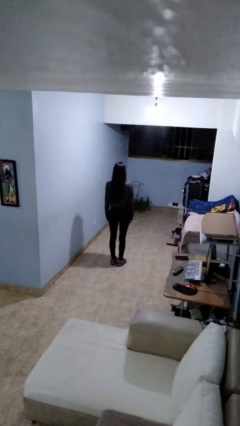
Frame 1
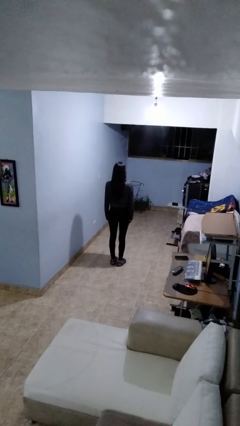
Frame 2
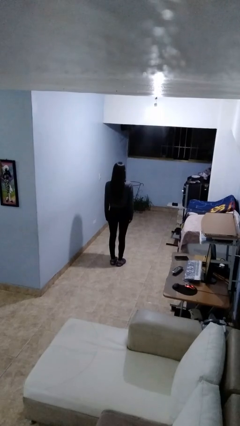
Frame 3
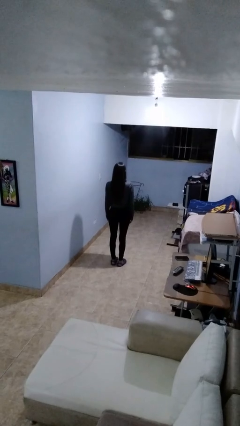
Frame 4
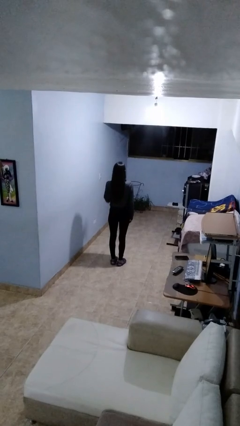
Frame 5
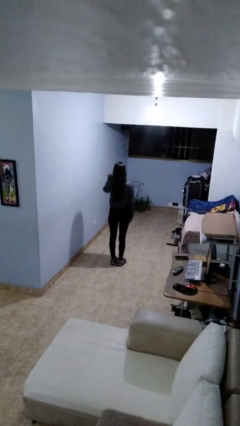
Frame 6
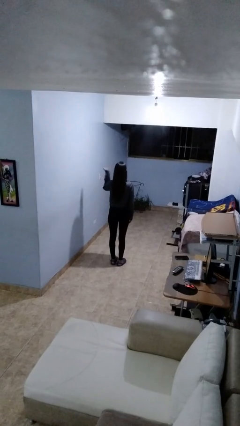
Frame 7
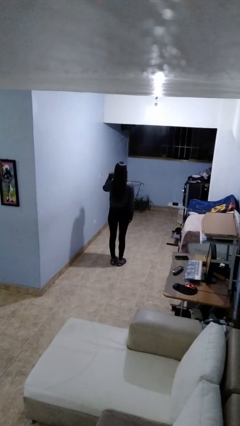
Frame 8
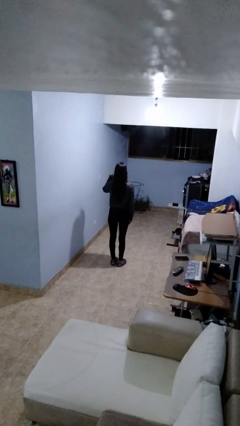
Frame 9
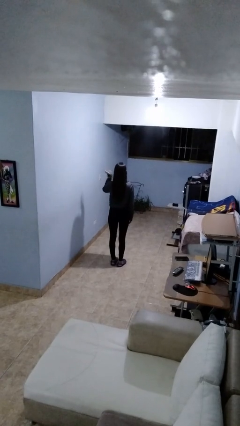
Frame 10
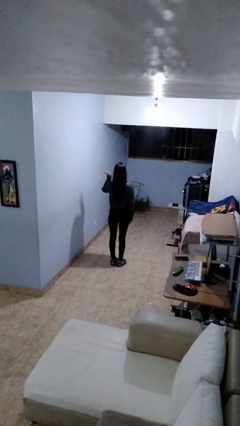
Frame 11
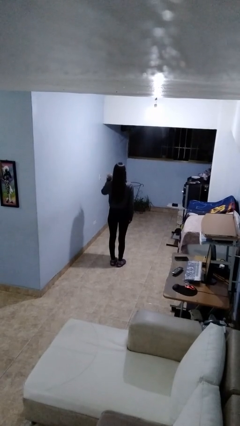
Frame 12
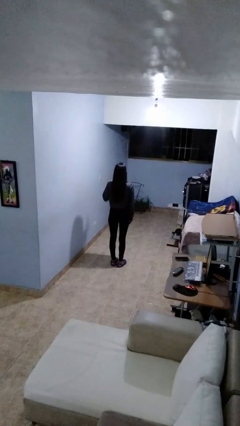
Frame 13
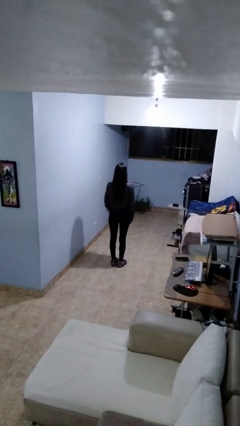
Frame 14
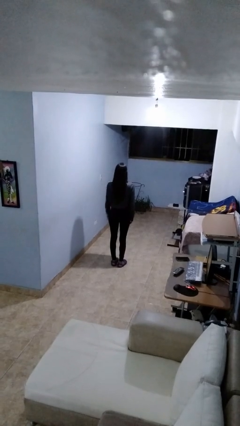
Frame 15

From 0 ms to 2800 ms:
person salutes

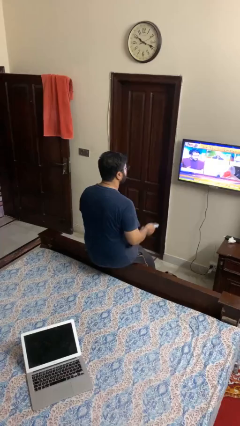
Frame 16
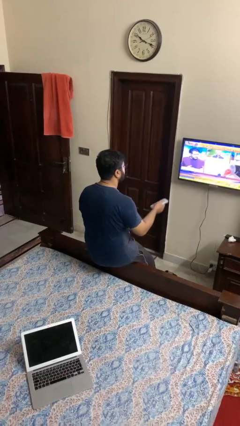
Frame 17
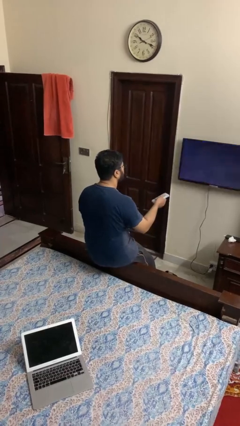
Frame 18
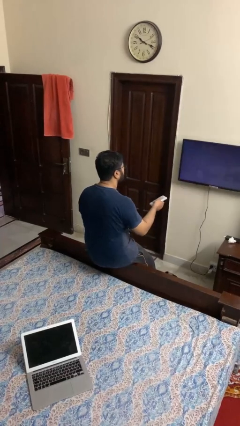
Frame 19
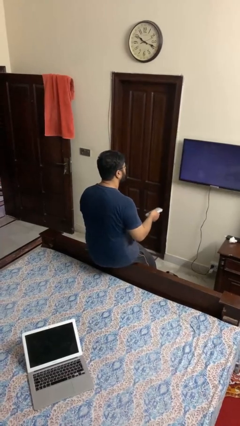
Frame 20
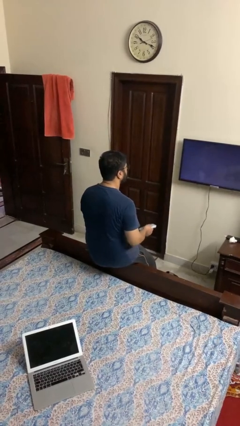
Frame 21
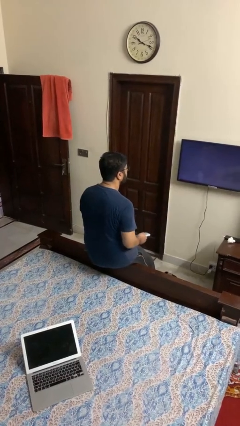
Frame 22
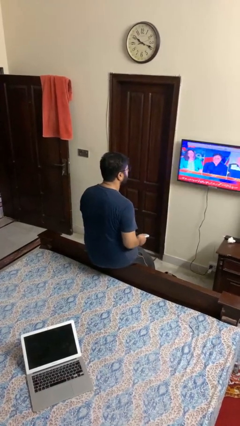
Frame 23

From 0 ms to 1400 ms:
person uses television remote

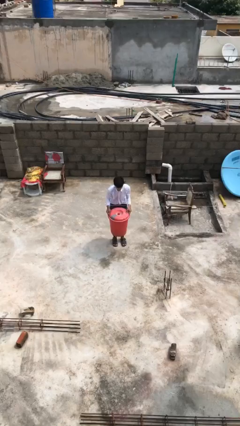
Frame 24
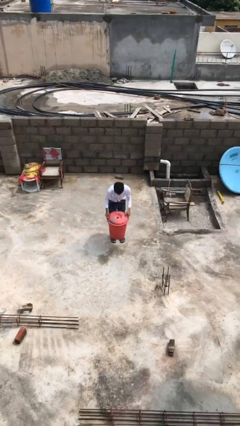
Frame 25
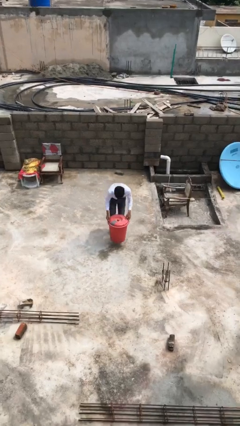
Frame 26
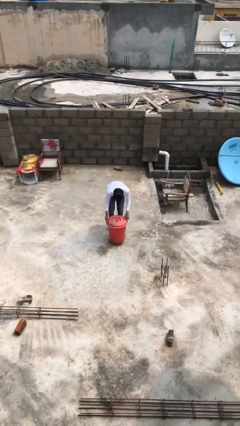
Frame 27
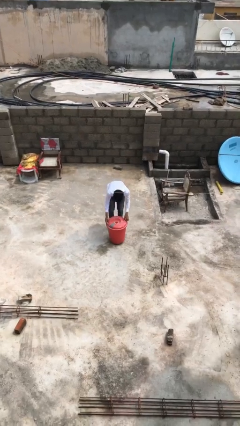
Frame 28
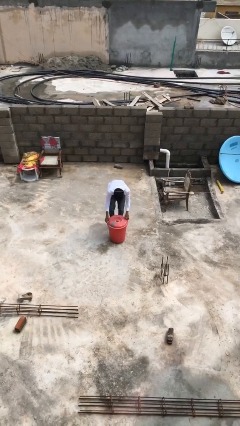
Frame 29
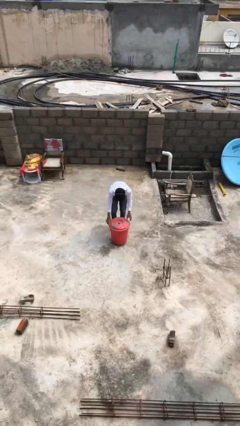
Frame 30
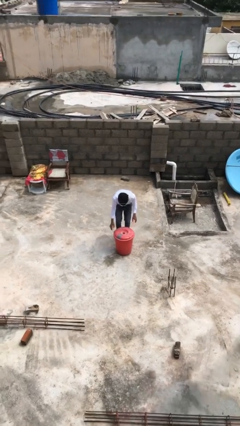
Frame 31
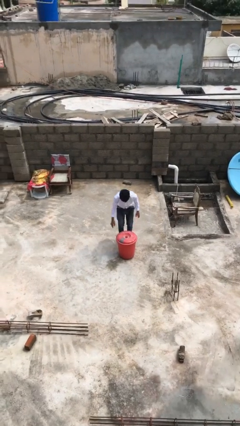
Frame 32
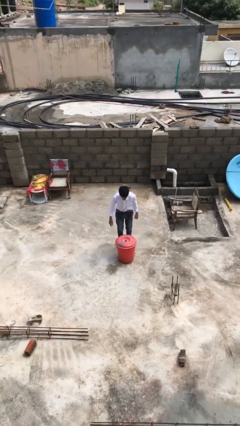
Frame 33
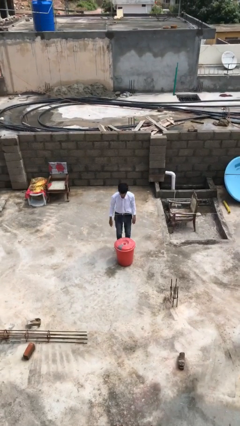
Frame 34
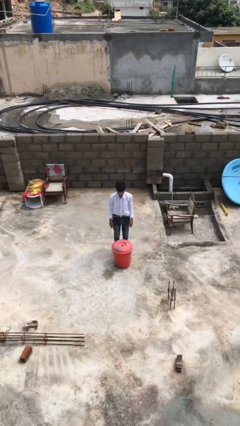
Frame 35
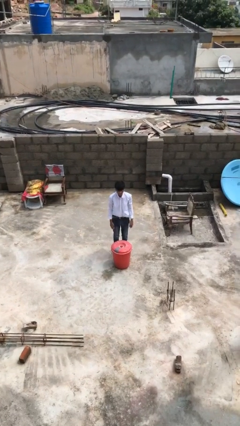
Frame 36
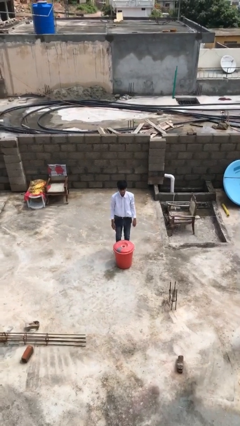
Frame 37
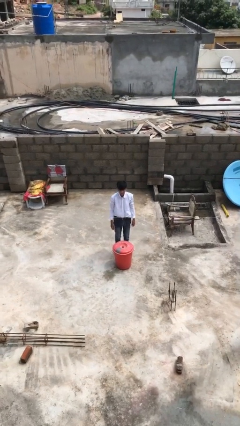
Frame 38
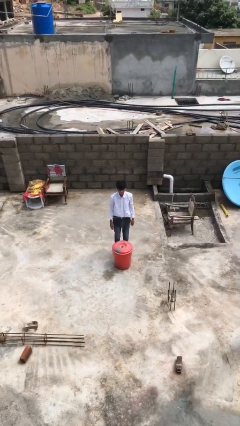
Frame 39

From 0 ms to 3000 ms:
person puts down object on floor

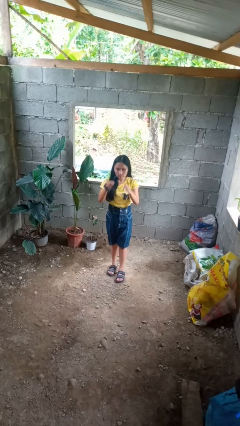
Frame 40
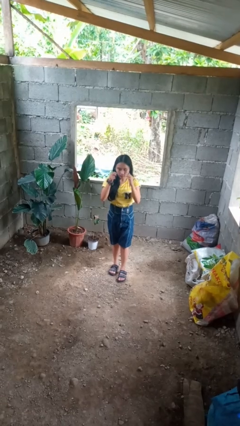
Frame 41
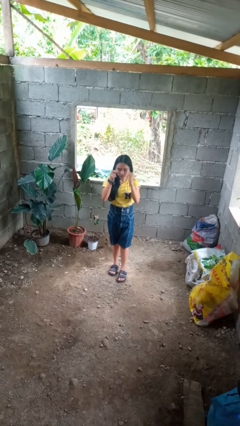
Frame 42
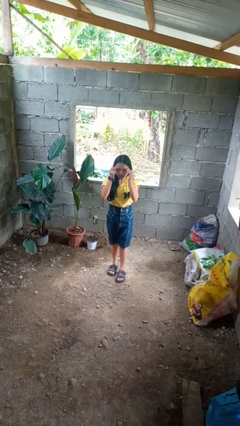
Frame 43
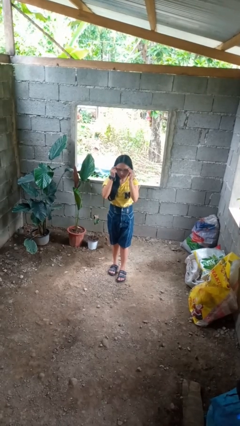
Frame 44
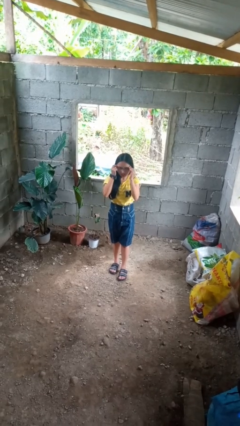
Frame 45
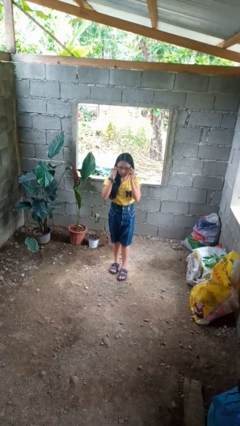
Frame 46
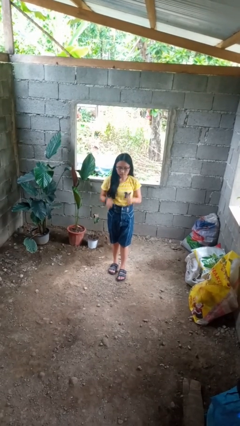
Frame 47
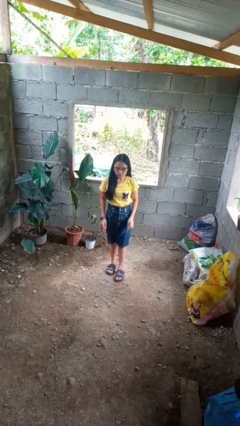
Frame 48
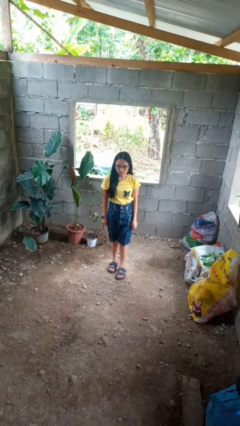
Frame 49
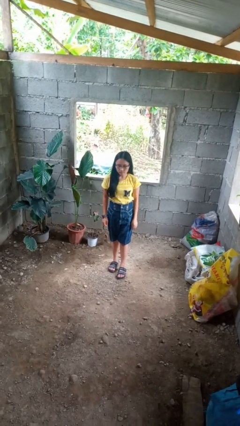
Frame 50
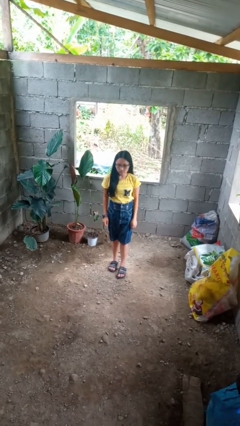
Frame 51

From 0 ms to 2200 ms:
person puts on glasses

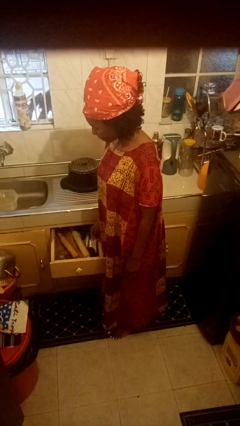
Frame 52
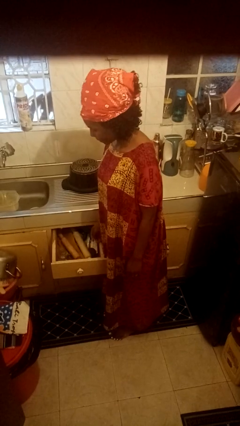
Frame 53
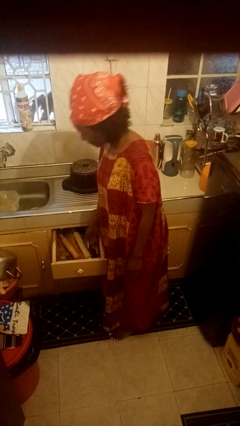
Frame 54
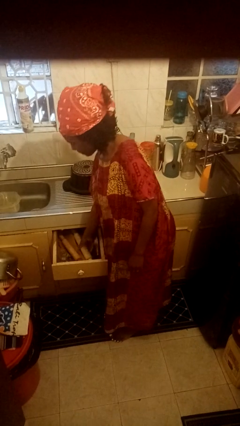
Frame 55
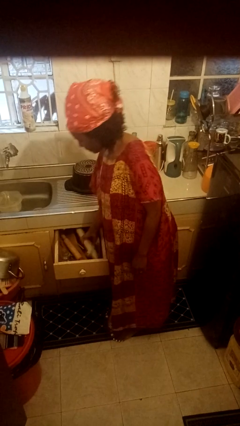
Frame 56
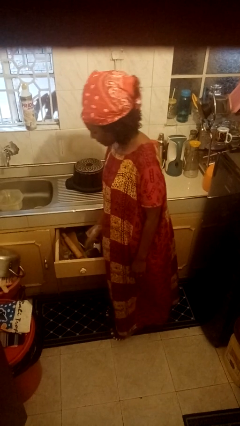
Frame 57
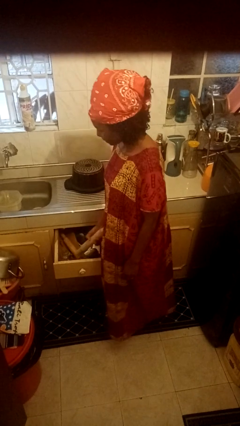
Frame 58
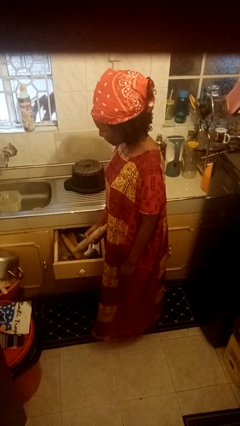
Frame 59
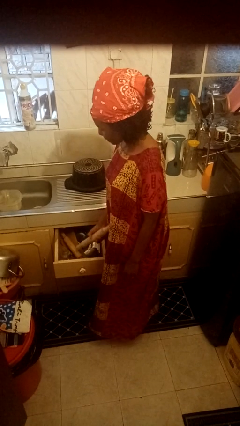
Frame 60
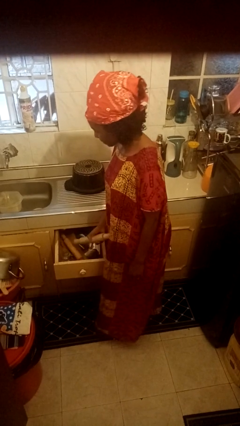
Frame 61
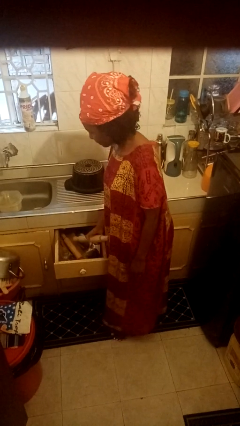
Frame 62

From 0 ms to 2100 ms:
person takes object from kitchen drawer

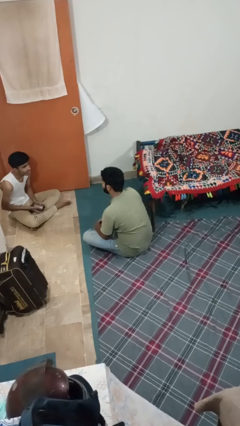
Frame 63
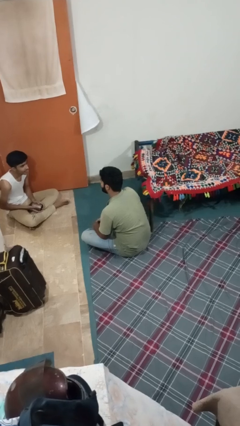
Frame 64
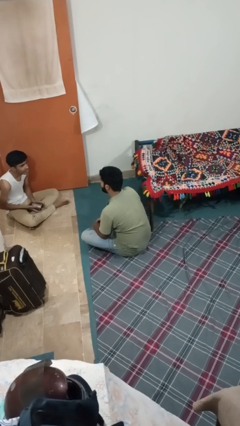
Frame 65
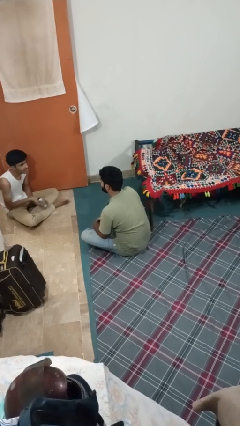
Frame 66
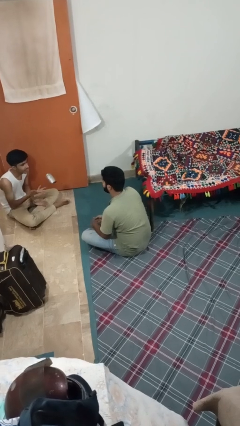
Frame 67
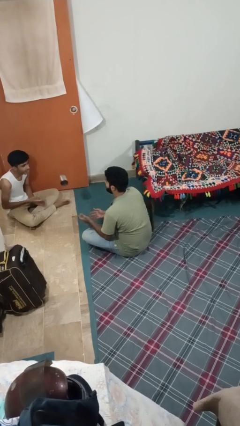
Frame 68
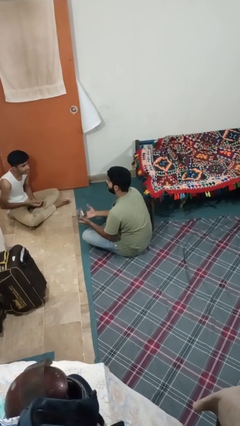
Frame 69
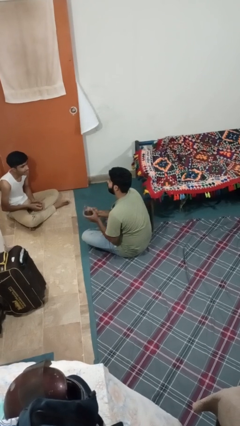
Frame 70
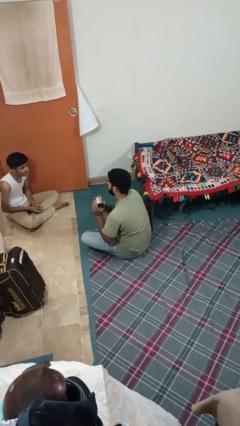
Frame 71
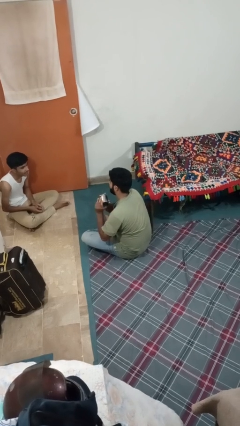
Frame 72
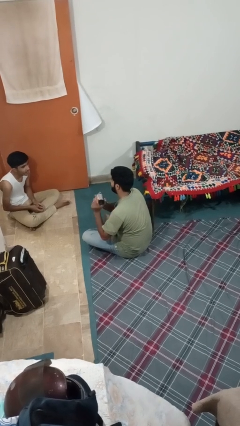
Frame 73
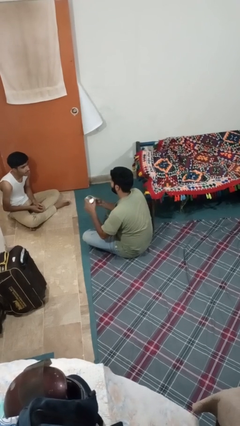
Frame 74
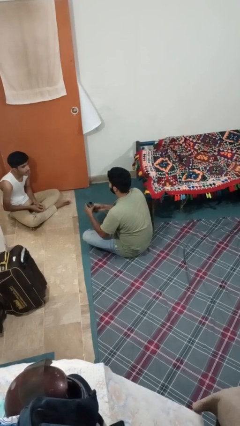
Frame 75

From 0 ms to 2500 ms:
person catches object from person

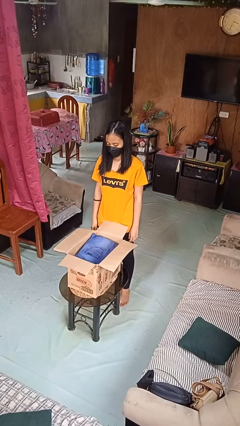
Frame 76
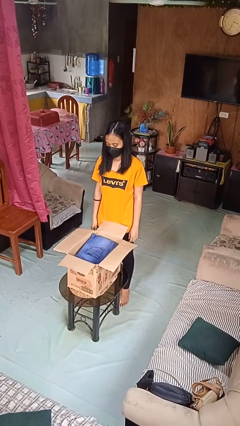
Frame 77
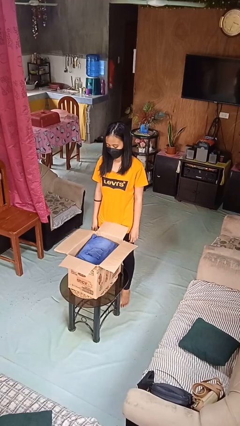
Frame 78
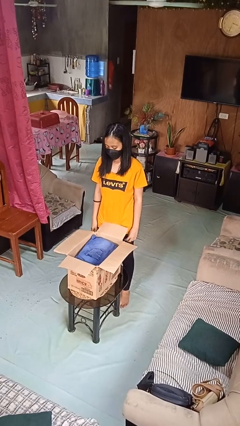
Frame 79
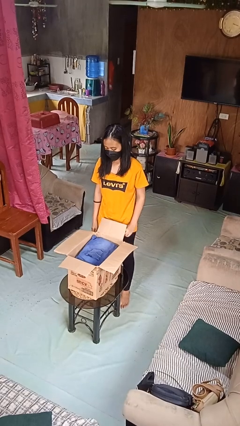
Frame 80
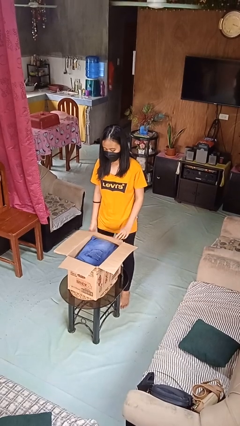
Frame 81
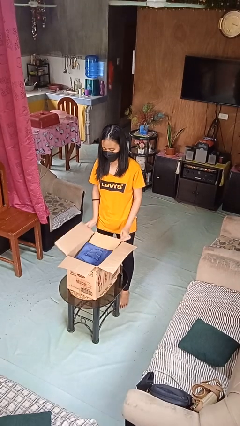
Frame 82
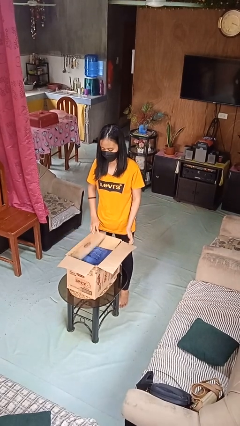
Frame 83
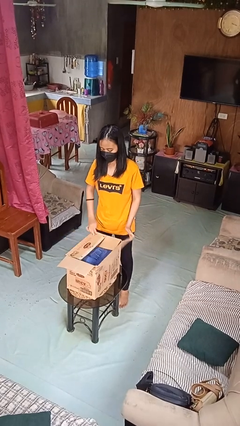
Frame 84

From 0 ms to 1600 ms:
person closes box

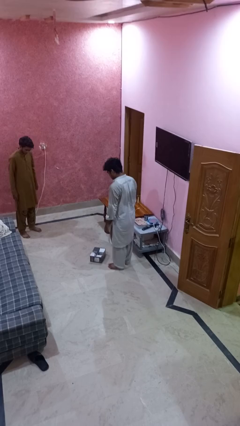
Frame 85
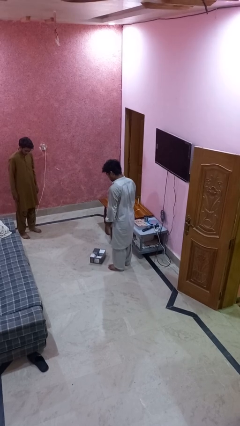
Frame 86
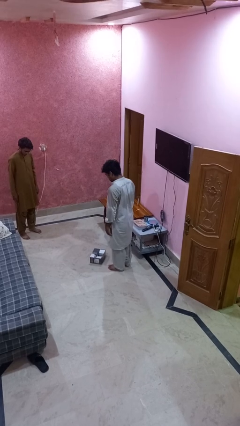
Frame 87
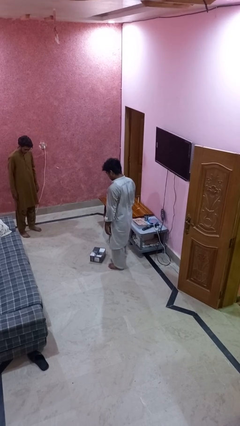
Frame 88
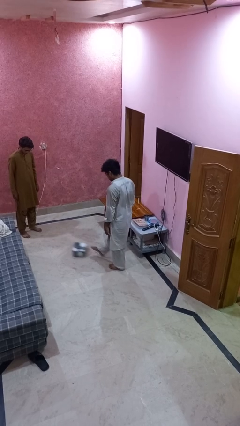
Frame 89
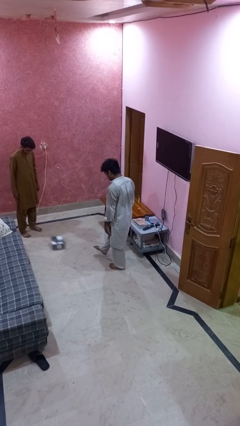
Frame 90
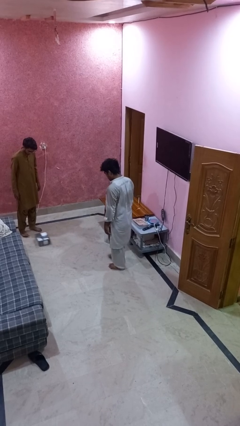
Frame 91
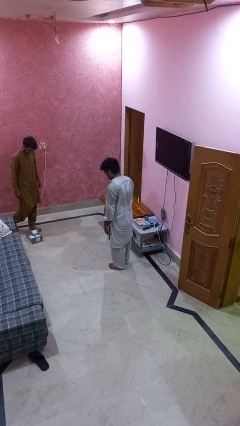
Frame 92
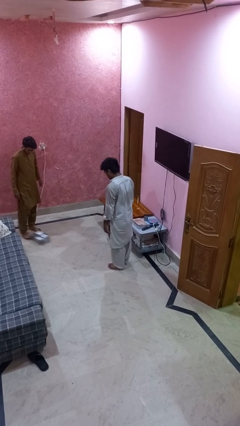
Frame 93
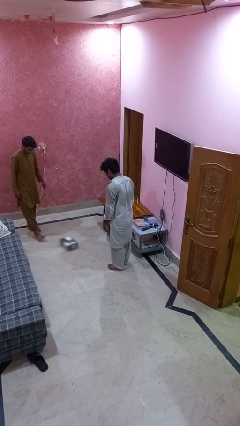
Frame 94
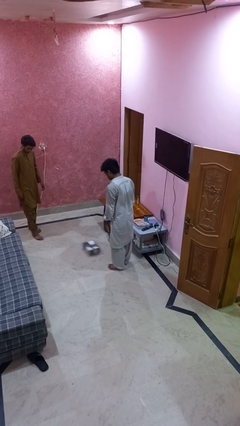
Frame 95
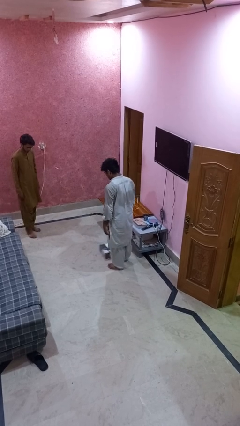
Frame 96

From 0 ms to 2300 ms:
person kicks object to person
